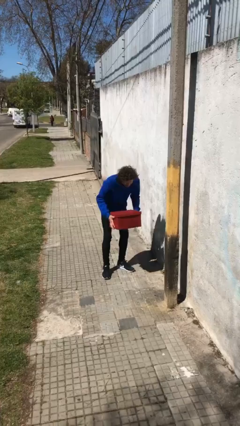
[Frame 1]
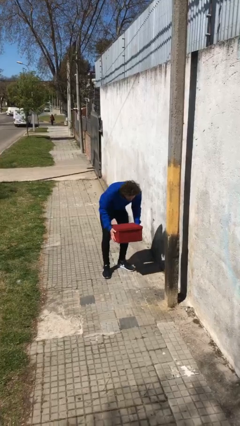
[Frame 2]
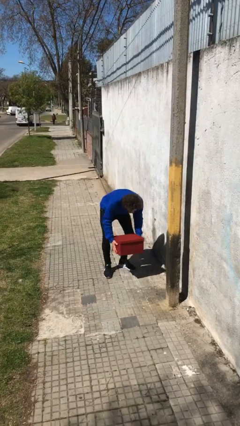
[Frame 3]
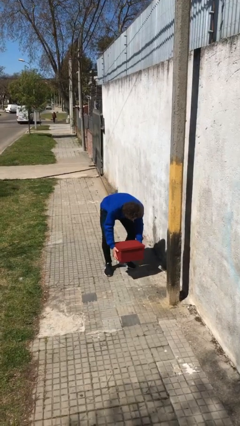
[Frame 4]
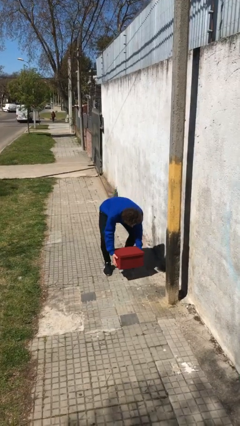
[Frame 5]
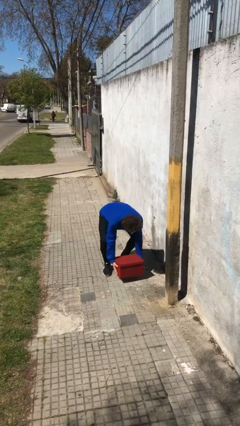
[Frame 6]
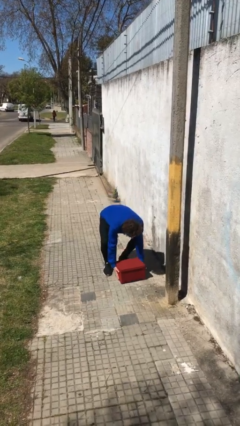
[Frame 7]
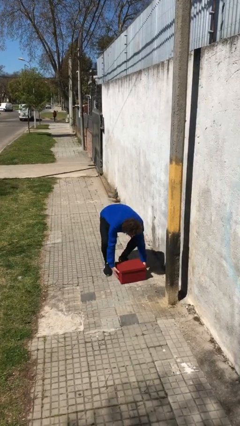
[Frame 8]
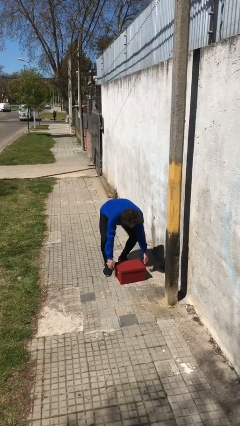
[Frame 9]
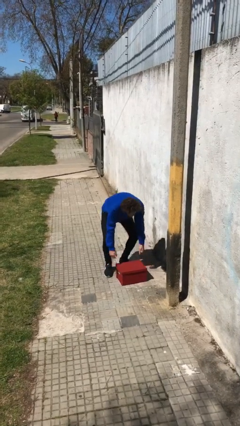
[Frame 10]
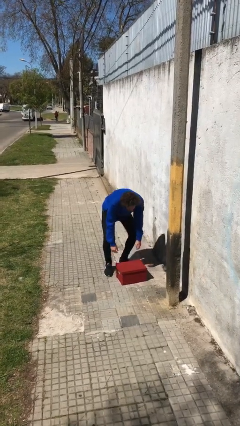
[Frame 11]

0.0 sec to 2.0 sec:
person puts down object on floor

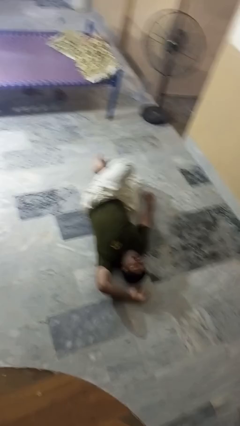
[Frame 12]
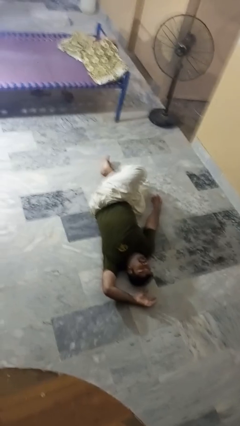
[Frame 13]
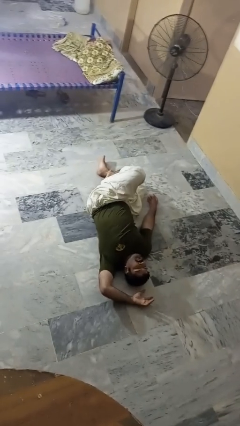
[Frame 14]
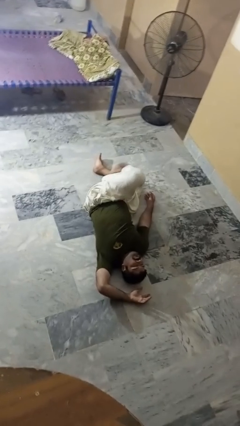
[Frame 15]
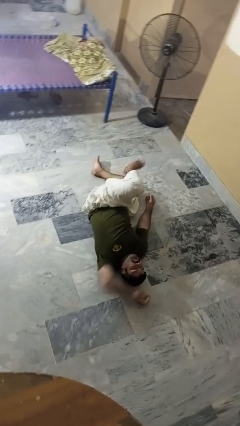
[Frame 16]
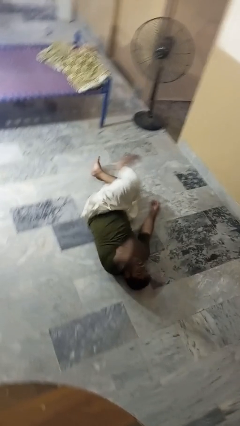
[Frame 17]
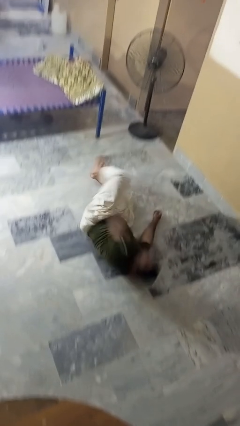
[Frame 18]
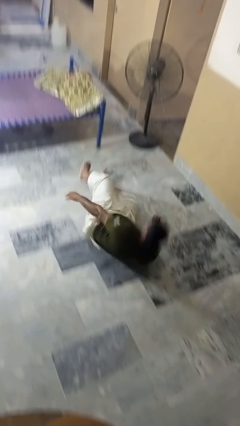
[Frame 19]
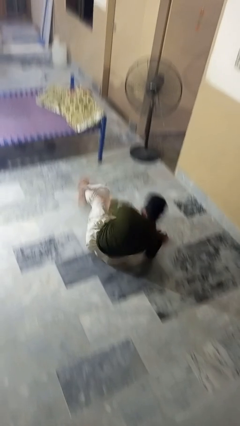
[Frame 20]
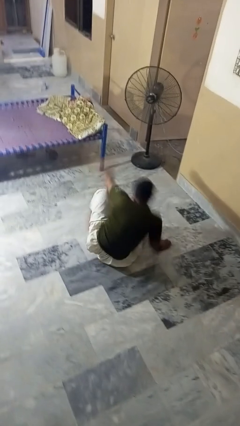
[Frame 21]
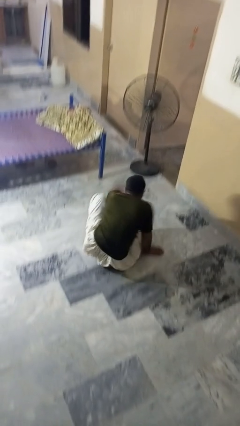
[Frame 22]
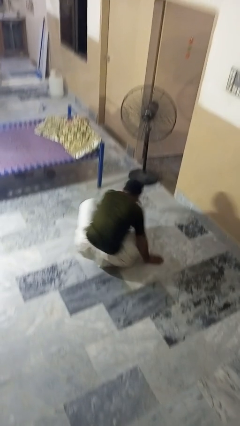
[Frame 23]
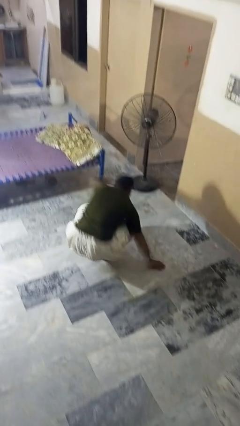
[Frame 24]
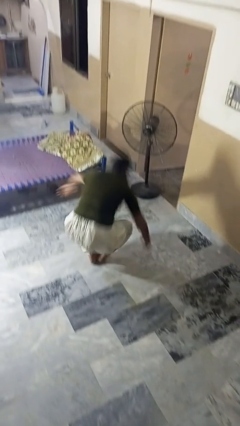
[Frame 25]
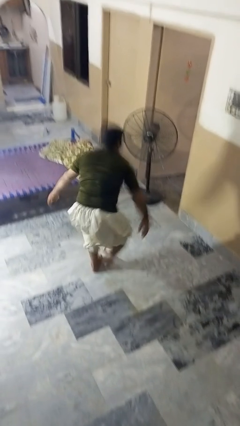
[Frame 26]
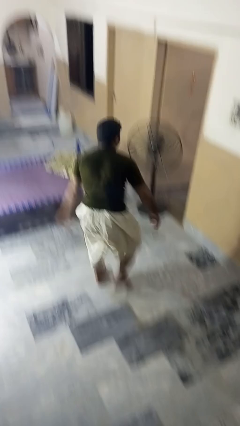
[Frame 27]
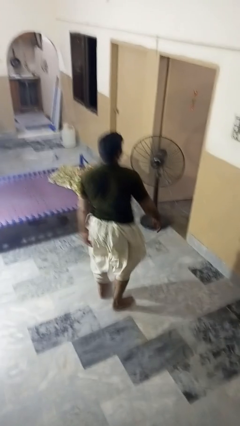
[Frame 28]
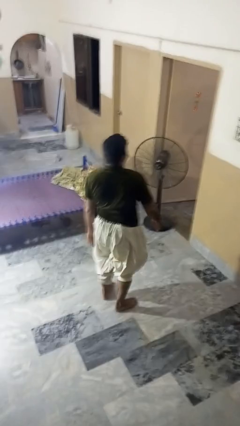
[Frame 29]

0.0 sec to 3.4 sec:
person stands up from floor

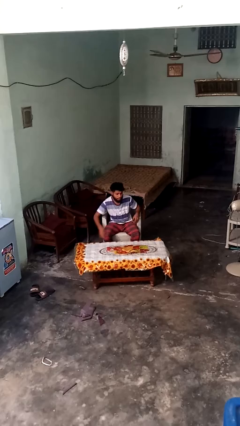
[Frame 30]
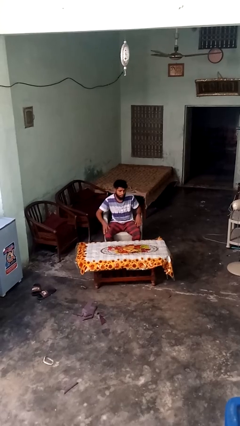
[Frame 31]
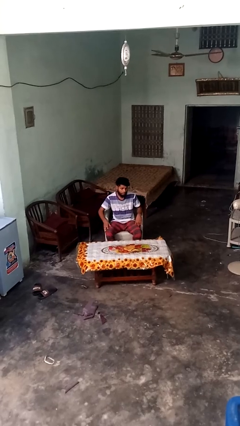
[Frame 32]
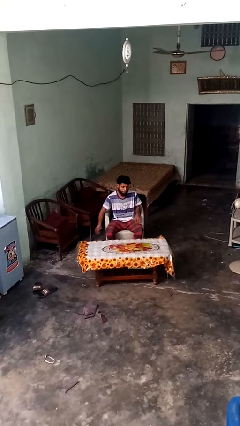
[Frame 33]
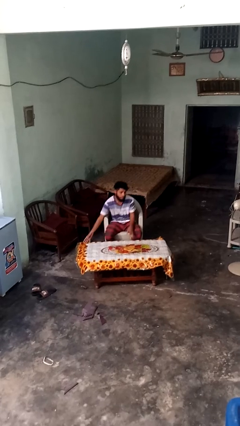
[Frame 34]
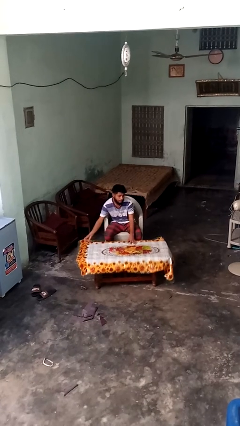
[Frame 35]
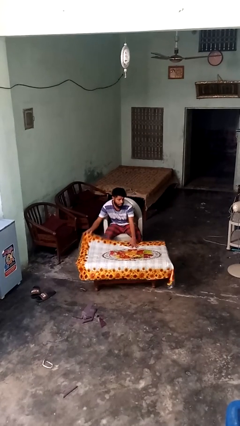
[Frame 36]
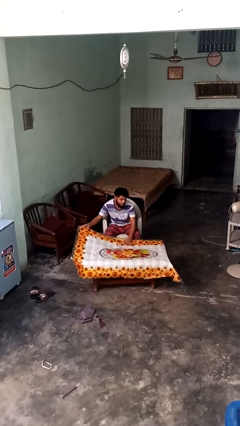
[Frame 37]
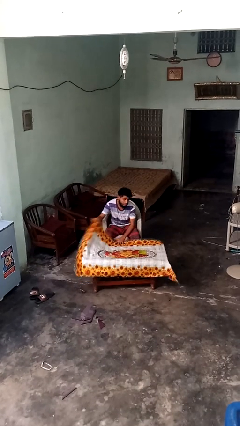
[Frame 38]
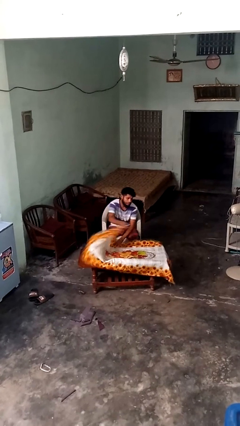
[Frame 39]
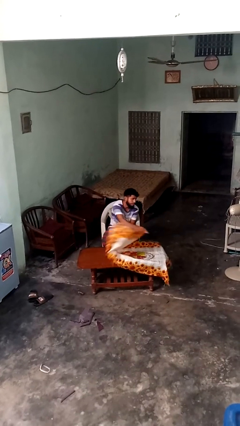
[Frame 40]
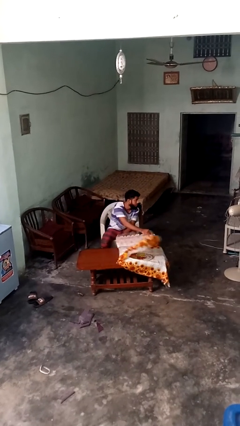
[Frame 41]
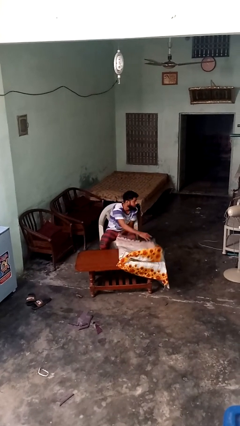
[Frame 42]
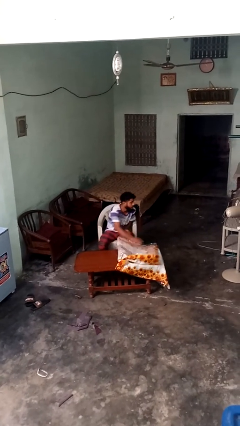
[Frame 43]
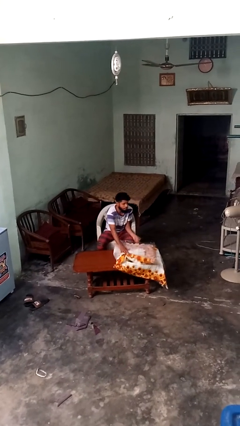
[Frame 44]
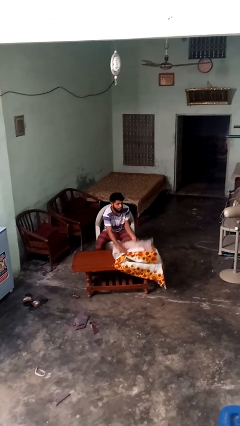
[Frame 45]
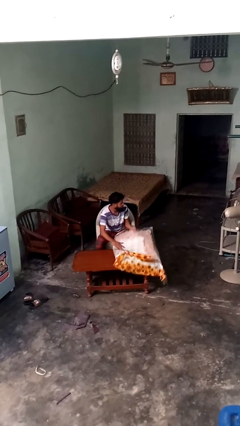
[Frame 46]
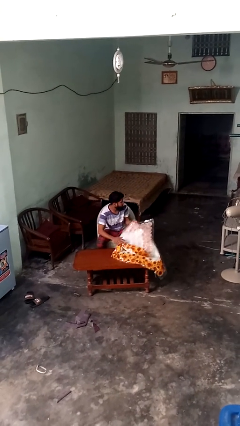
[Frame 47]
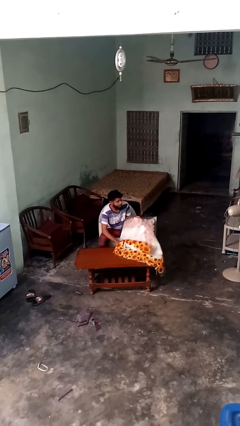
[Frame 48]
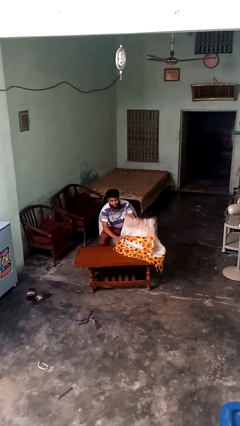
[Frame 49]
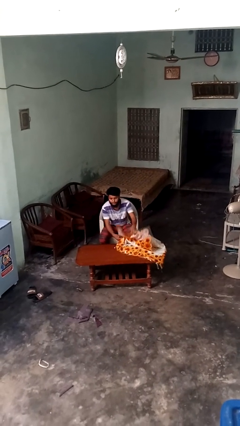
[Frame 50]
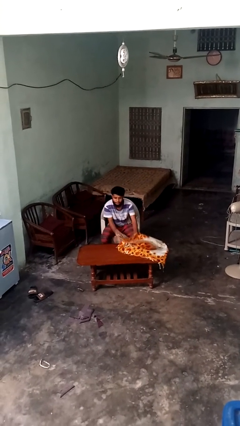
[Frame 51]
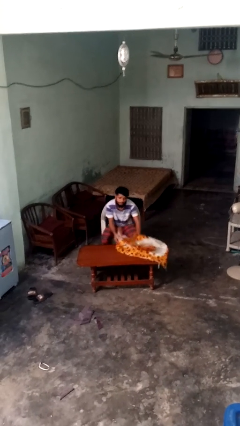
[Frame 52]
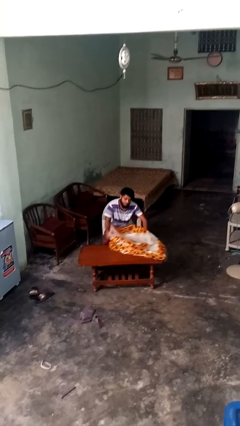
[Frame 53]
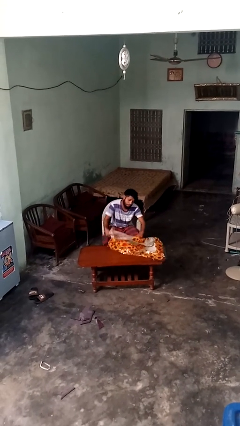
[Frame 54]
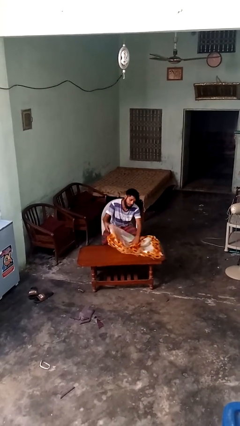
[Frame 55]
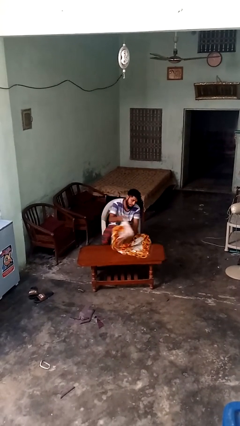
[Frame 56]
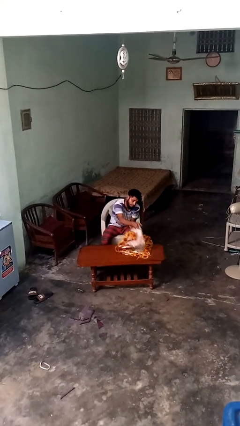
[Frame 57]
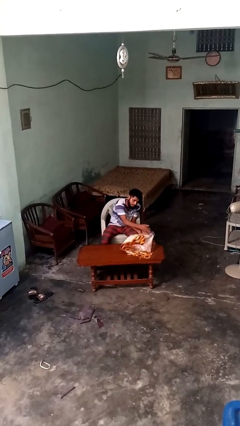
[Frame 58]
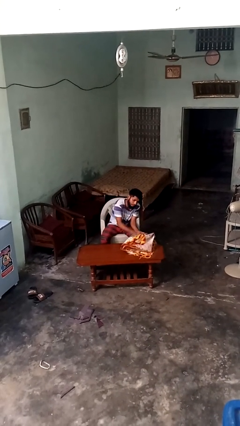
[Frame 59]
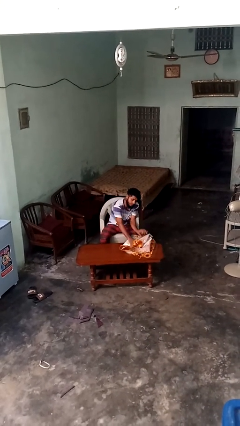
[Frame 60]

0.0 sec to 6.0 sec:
person folds tablecloth

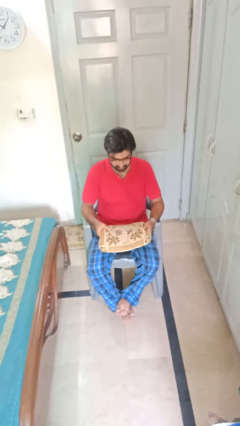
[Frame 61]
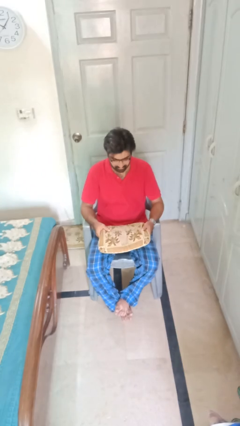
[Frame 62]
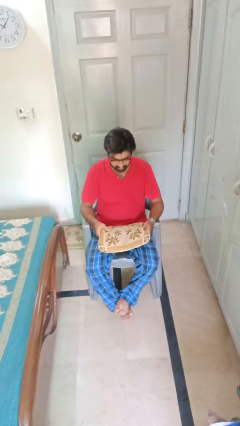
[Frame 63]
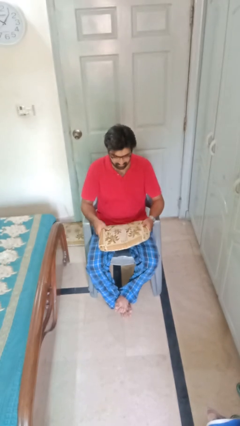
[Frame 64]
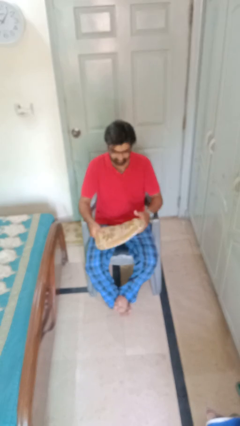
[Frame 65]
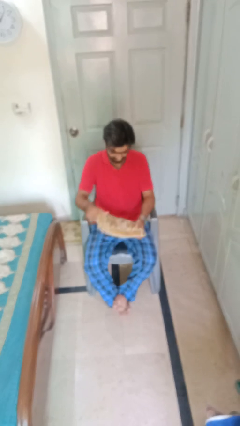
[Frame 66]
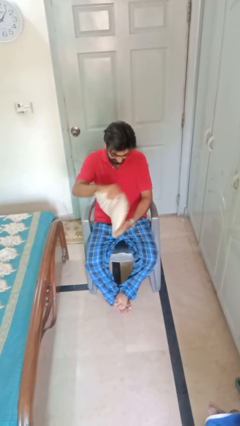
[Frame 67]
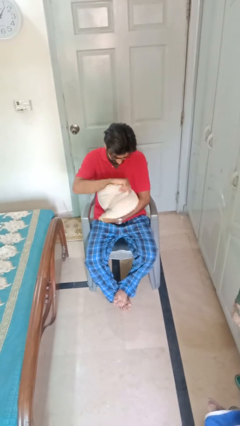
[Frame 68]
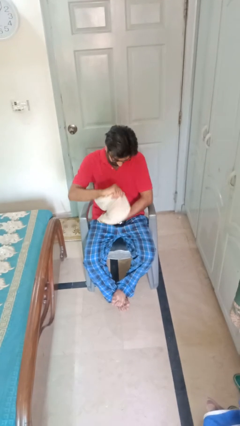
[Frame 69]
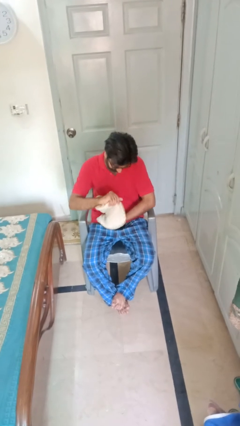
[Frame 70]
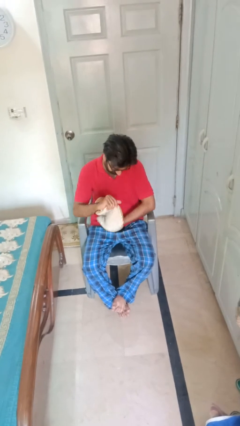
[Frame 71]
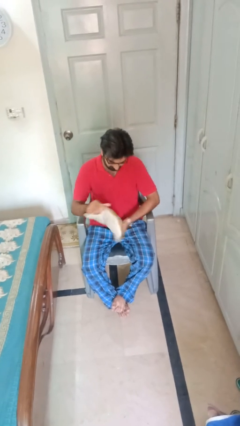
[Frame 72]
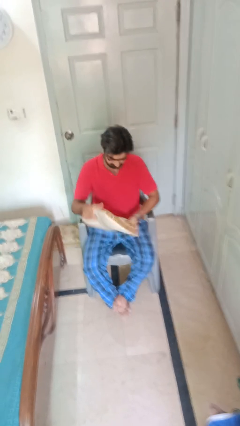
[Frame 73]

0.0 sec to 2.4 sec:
person squeezes object

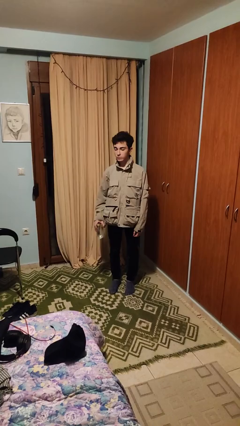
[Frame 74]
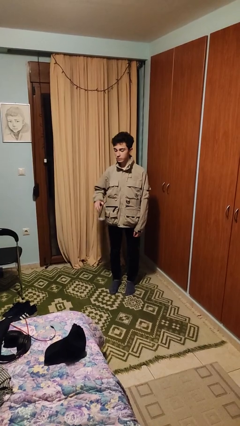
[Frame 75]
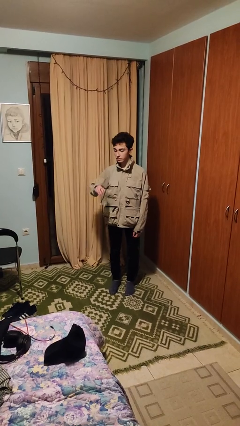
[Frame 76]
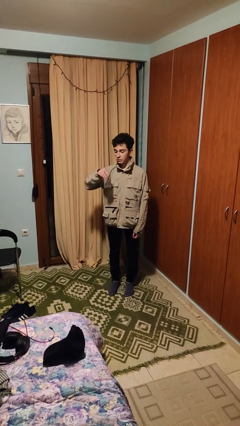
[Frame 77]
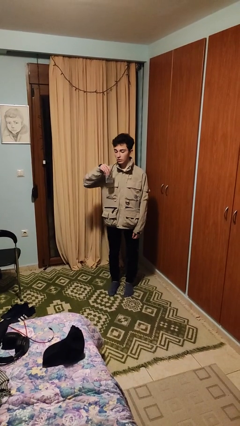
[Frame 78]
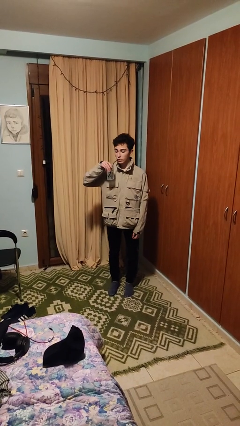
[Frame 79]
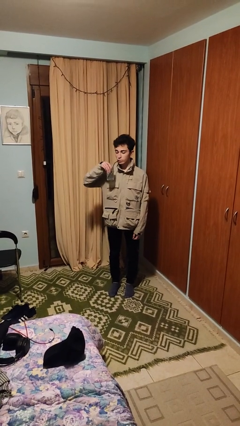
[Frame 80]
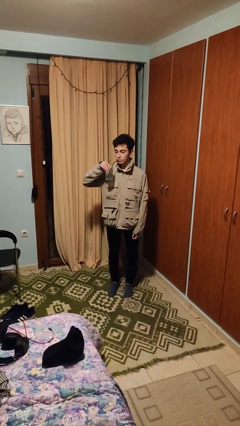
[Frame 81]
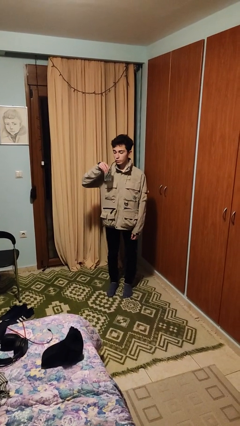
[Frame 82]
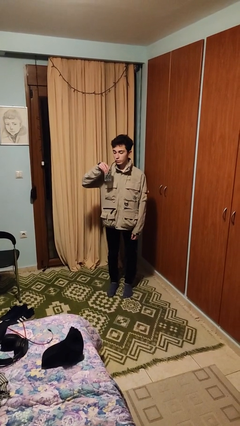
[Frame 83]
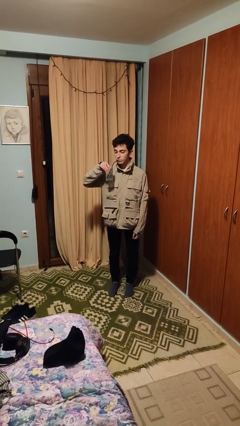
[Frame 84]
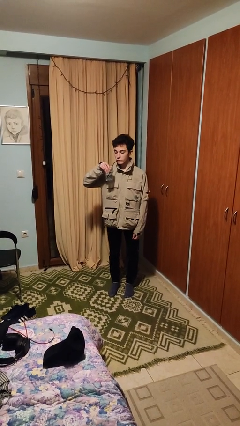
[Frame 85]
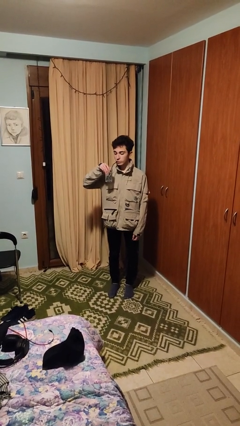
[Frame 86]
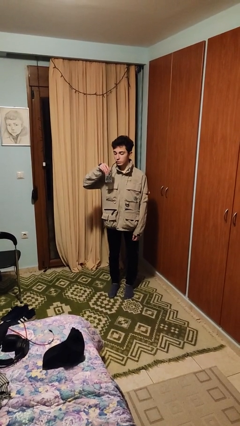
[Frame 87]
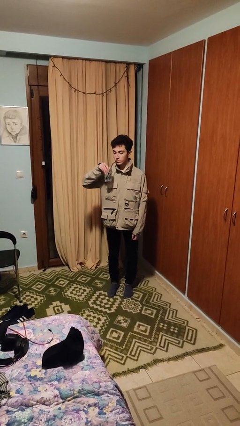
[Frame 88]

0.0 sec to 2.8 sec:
person drinks from straw

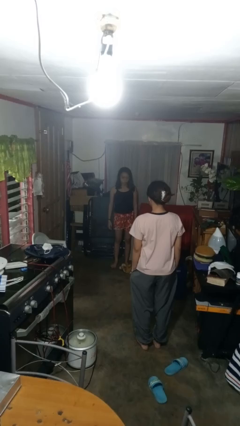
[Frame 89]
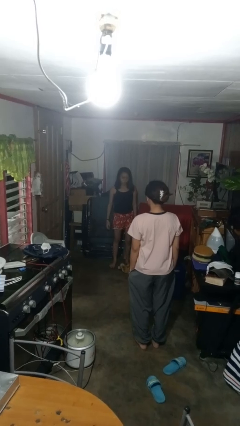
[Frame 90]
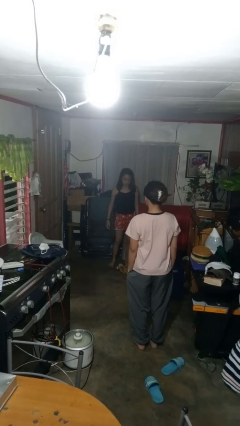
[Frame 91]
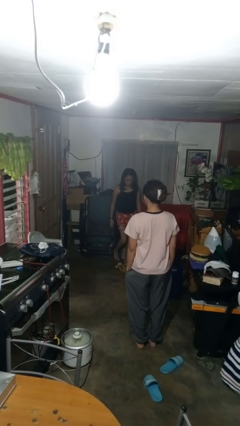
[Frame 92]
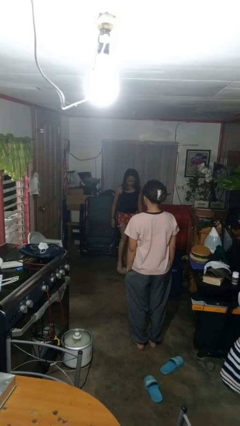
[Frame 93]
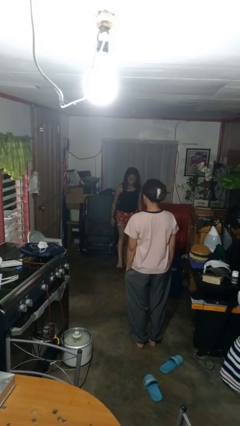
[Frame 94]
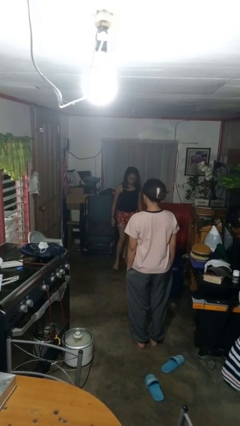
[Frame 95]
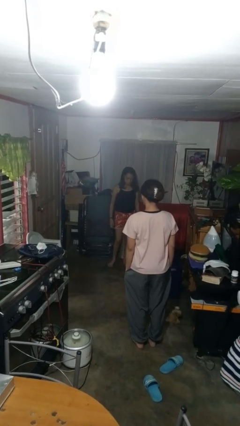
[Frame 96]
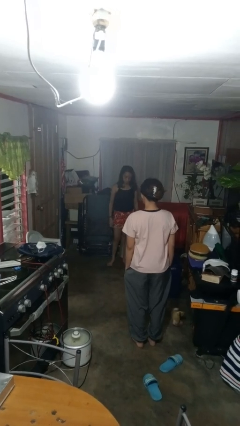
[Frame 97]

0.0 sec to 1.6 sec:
person kicks object to person
